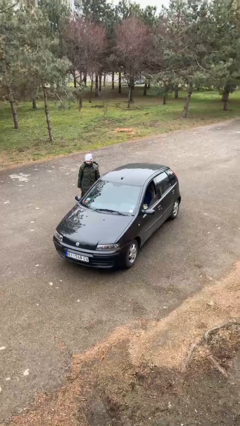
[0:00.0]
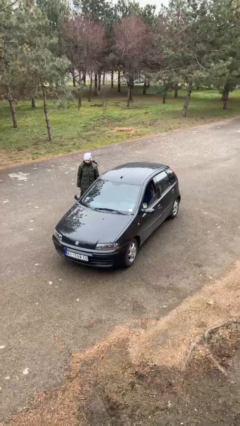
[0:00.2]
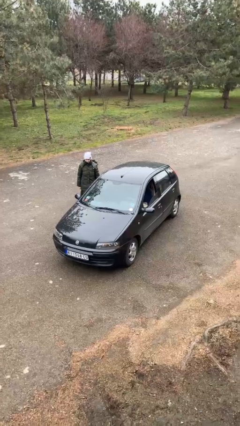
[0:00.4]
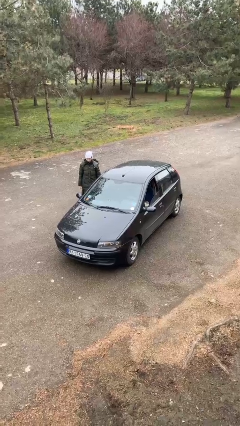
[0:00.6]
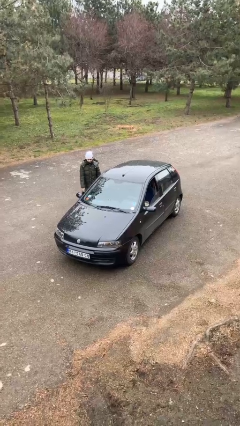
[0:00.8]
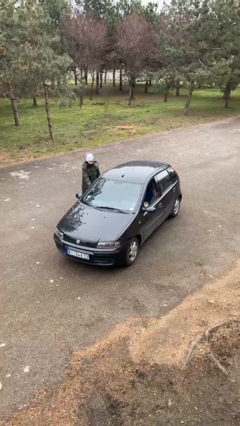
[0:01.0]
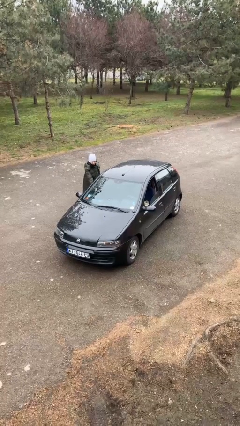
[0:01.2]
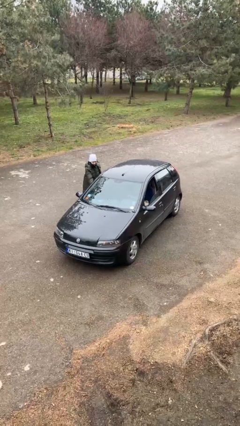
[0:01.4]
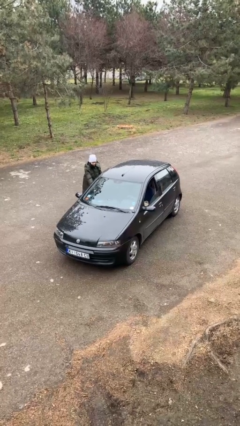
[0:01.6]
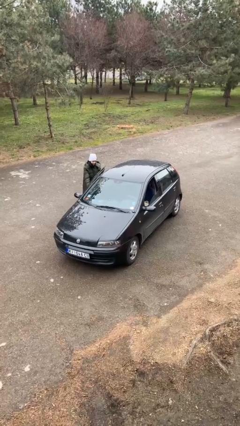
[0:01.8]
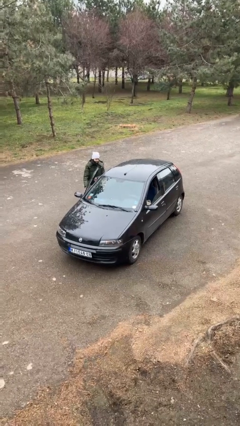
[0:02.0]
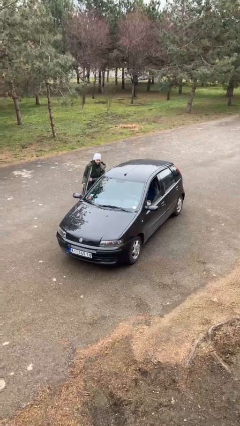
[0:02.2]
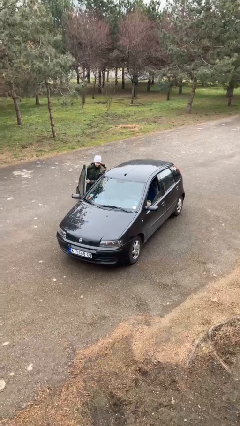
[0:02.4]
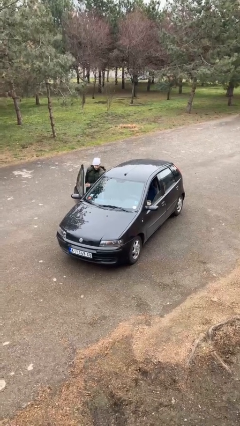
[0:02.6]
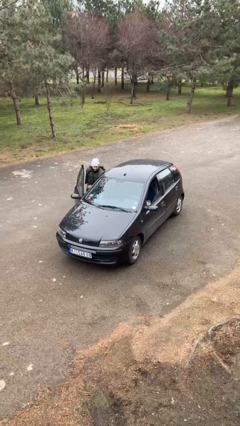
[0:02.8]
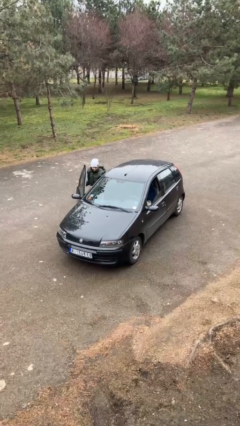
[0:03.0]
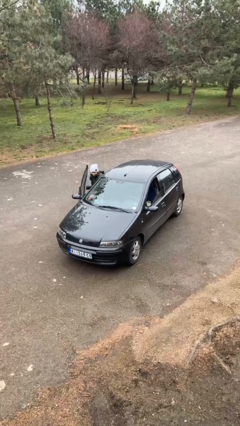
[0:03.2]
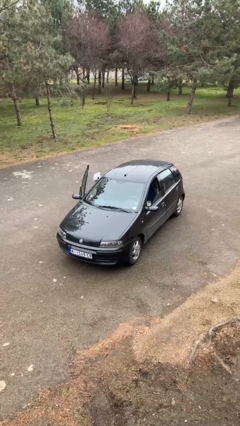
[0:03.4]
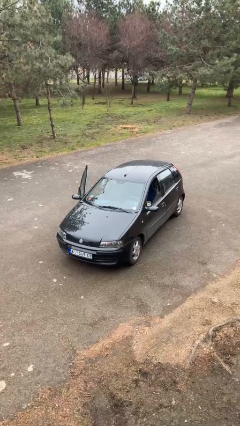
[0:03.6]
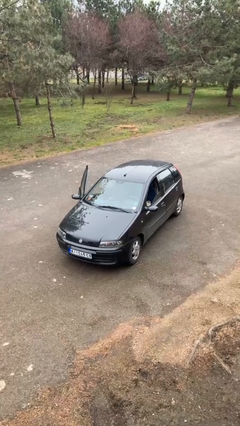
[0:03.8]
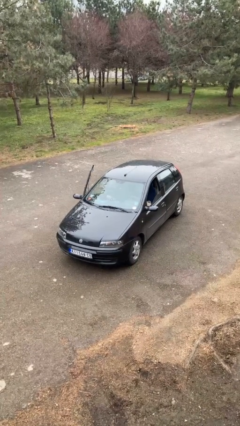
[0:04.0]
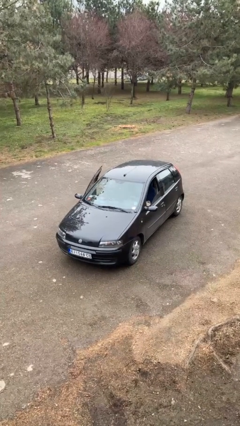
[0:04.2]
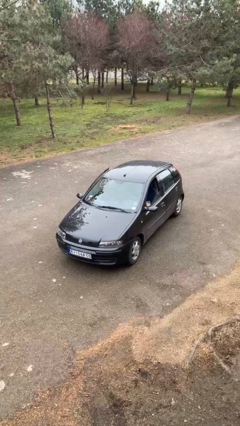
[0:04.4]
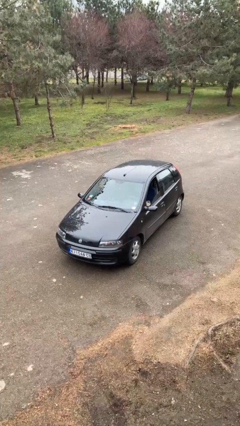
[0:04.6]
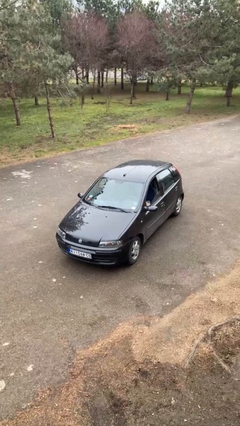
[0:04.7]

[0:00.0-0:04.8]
car picks up person

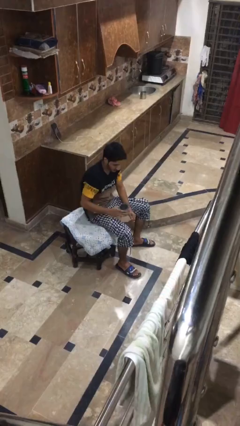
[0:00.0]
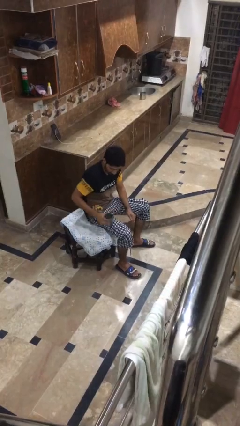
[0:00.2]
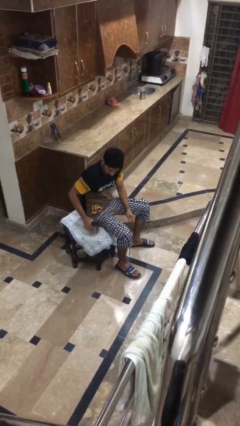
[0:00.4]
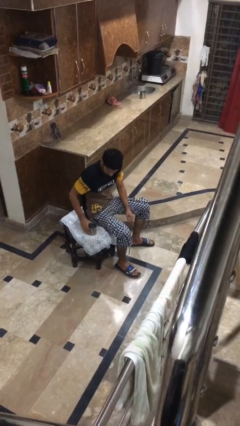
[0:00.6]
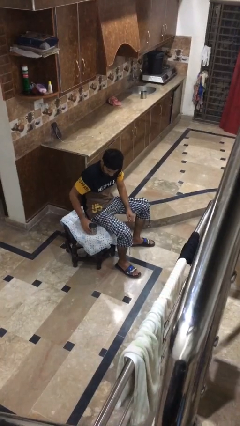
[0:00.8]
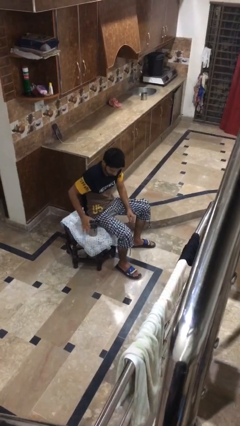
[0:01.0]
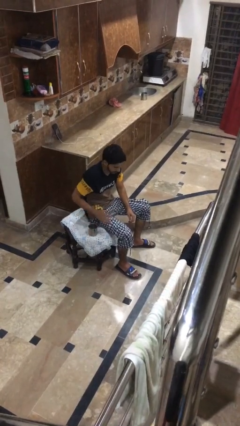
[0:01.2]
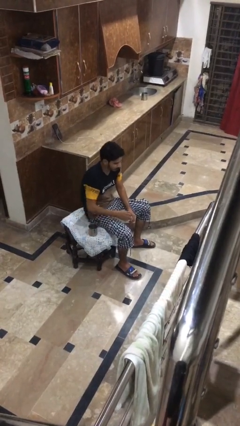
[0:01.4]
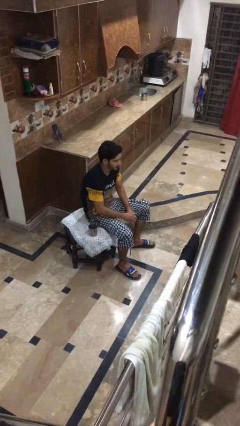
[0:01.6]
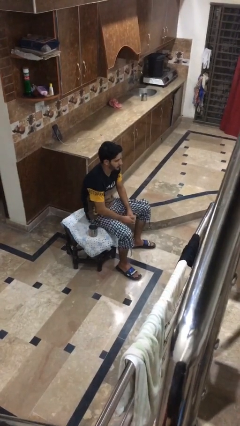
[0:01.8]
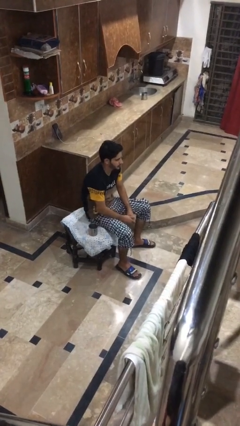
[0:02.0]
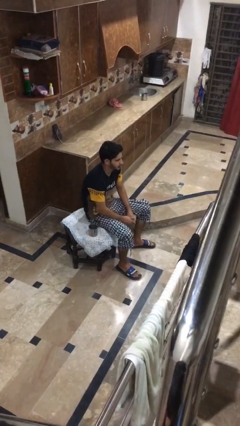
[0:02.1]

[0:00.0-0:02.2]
person puts down object on table

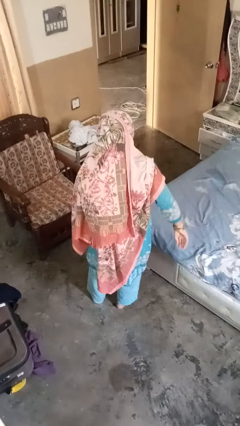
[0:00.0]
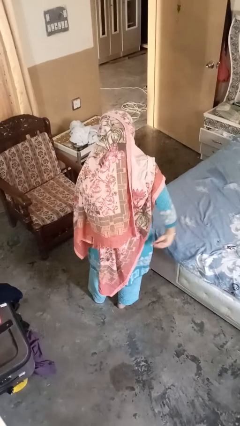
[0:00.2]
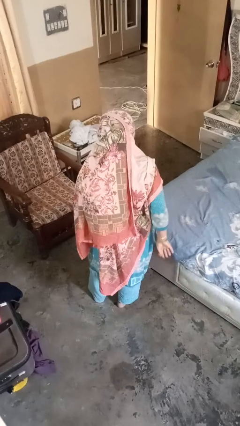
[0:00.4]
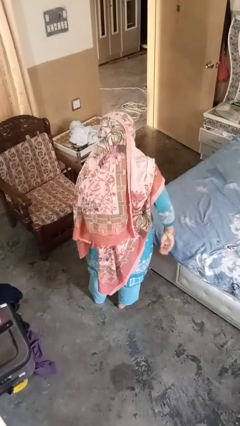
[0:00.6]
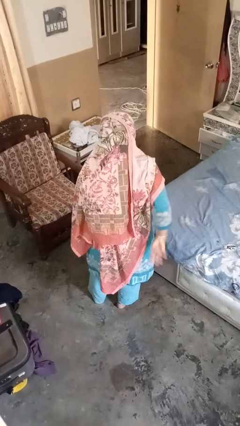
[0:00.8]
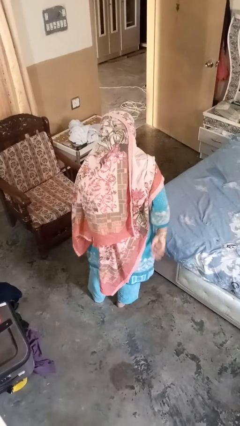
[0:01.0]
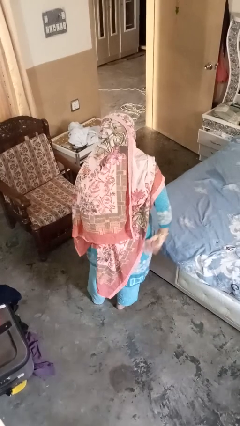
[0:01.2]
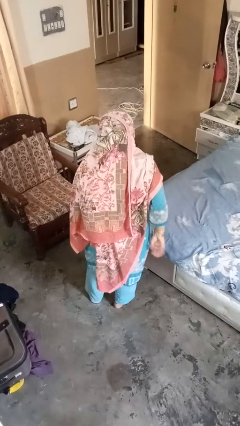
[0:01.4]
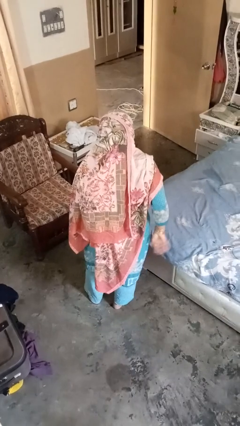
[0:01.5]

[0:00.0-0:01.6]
person gestures behind me

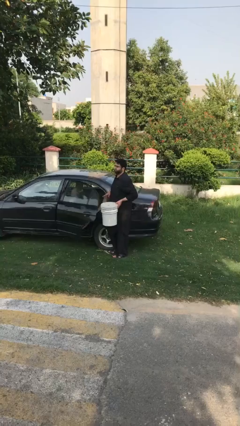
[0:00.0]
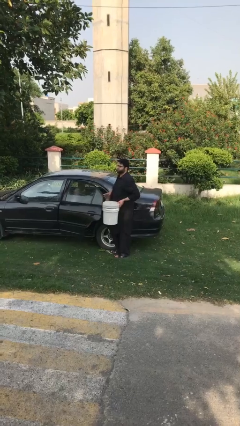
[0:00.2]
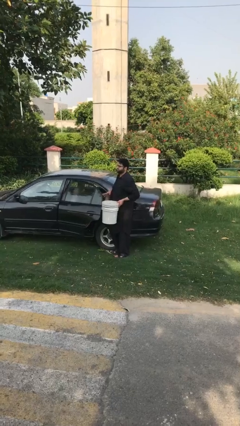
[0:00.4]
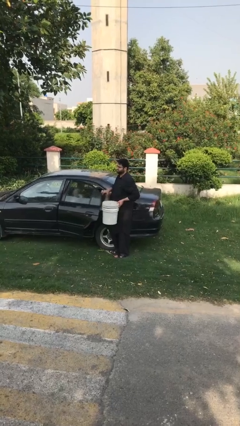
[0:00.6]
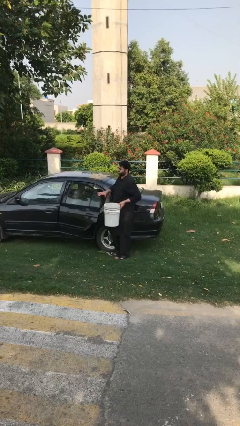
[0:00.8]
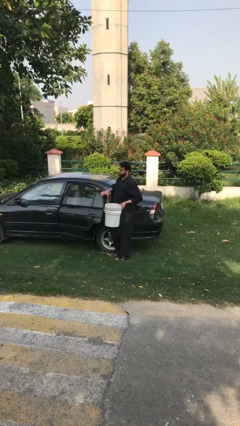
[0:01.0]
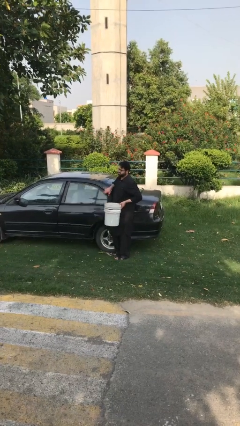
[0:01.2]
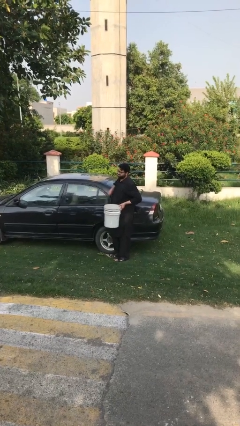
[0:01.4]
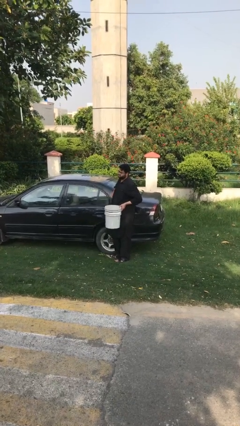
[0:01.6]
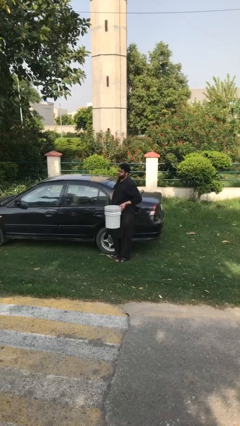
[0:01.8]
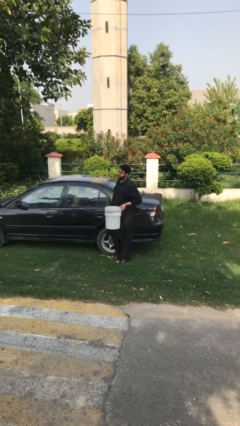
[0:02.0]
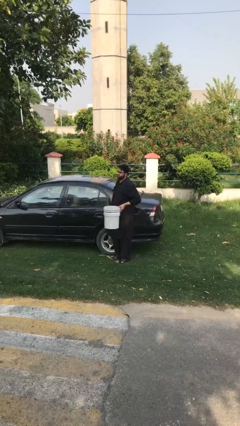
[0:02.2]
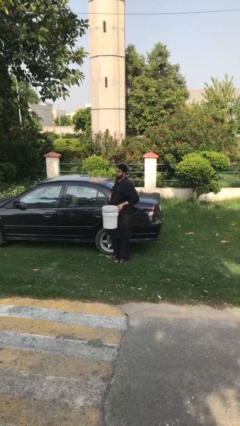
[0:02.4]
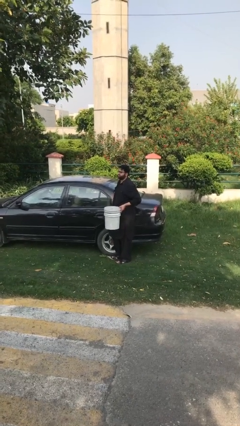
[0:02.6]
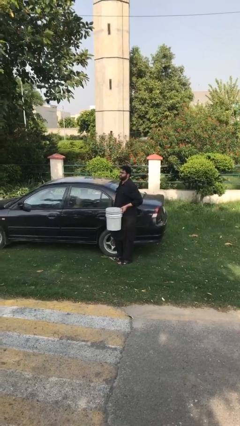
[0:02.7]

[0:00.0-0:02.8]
person closes car door

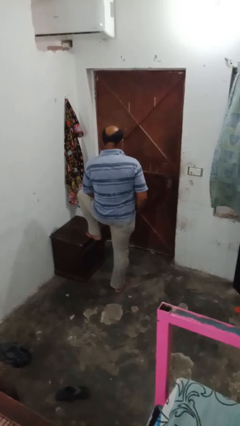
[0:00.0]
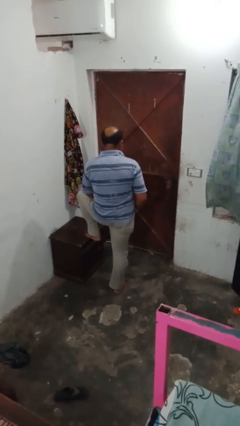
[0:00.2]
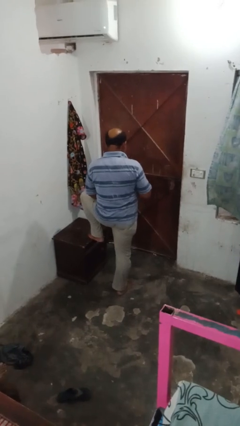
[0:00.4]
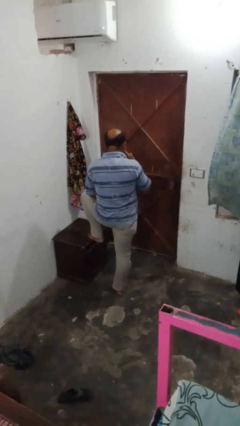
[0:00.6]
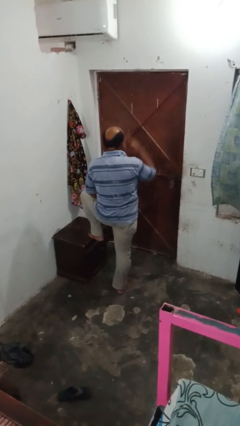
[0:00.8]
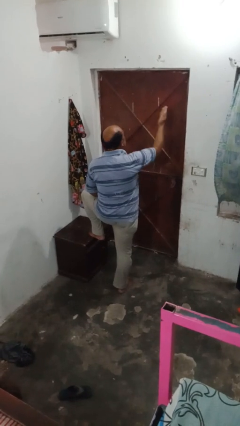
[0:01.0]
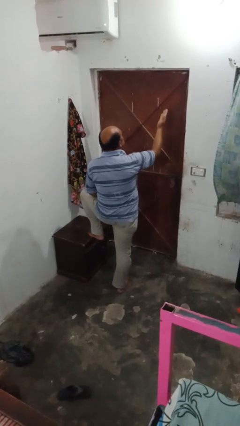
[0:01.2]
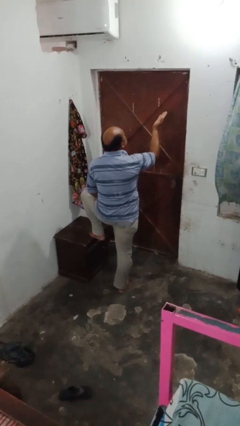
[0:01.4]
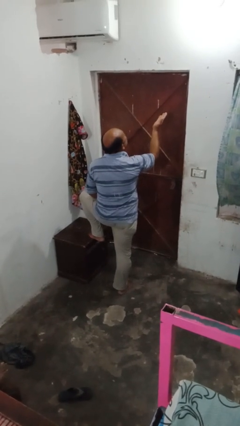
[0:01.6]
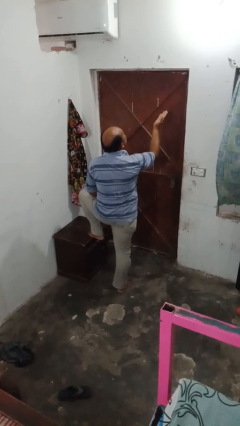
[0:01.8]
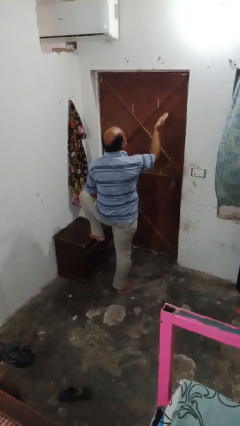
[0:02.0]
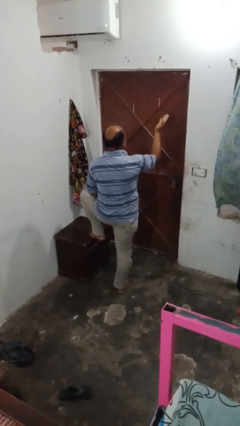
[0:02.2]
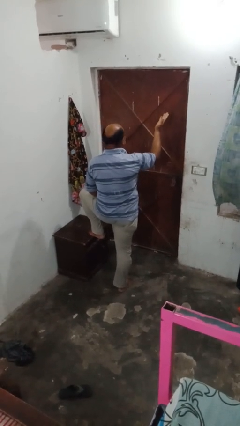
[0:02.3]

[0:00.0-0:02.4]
person gestures blow kiss

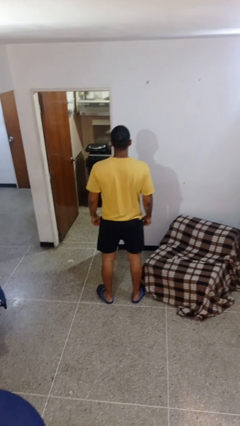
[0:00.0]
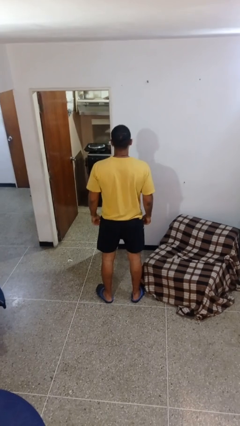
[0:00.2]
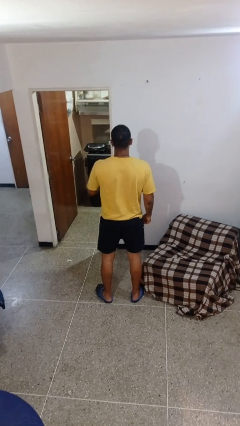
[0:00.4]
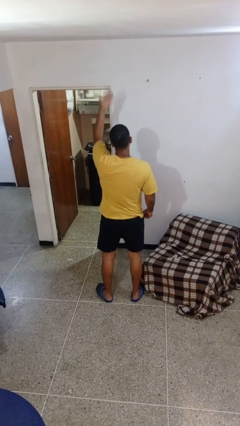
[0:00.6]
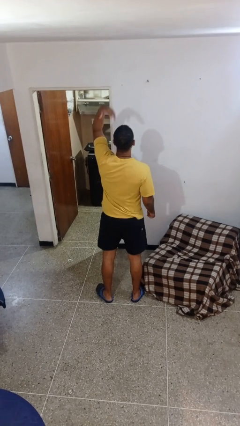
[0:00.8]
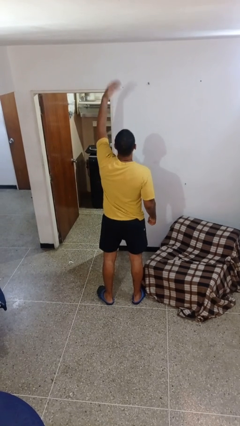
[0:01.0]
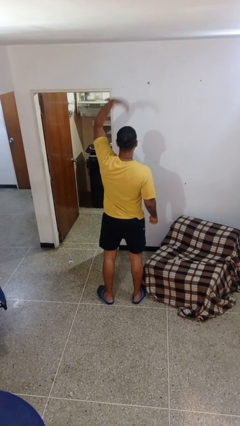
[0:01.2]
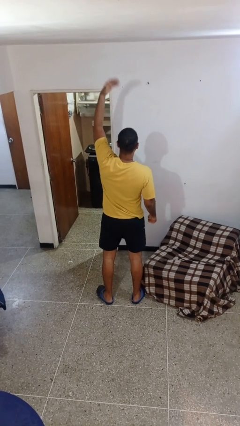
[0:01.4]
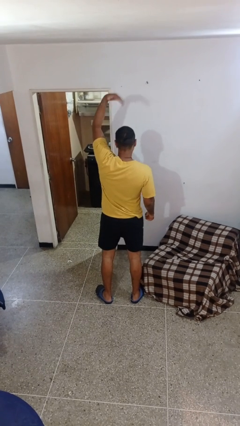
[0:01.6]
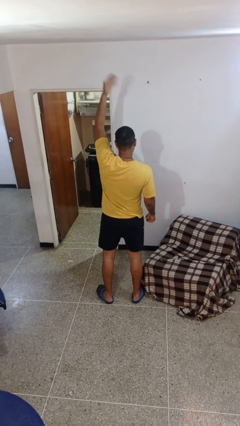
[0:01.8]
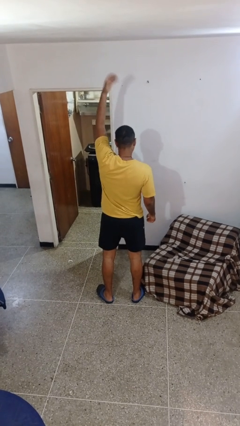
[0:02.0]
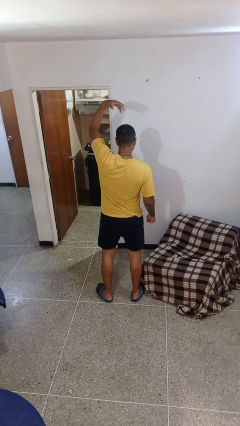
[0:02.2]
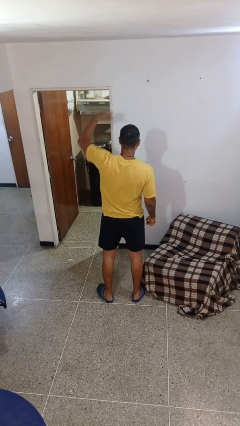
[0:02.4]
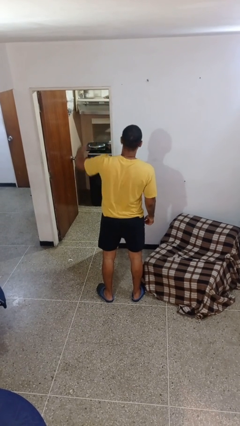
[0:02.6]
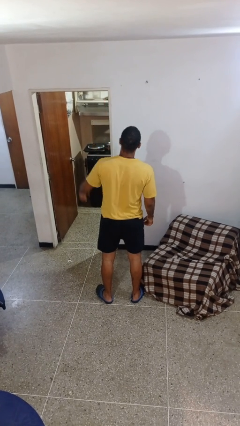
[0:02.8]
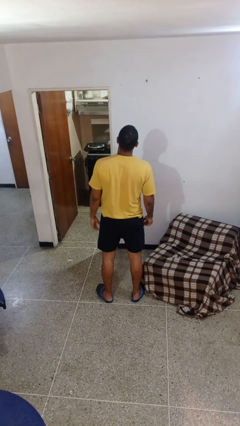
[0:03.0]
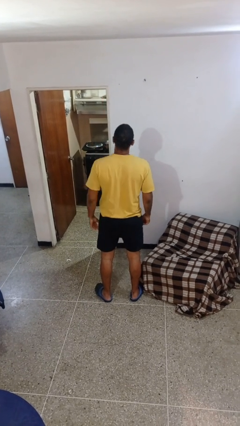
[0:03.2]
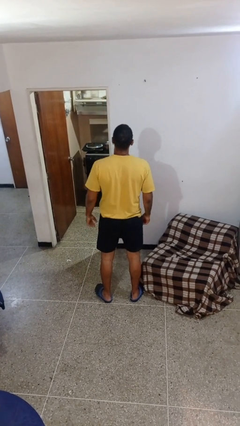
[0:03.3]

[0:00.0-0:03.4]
person gestures come here
